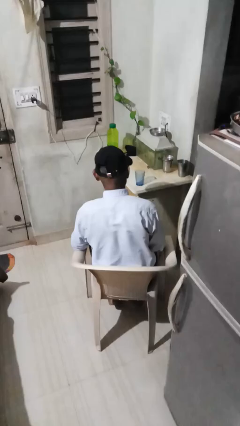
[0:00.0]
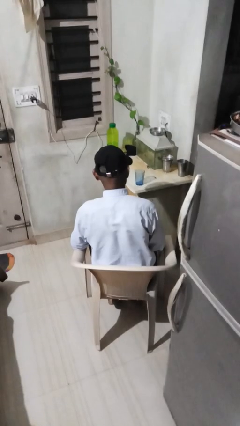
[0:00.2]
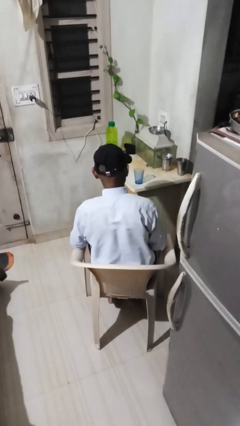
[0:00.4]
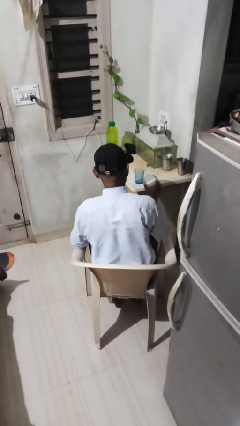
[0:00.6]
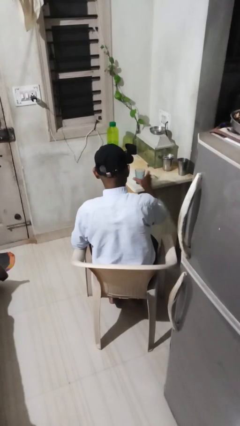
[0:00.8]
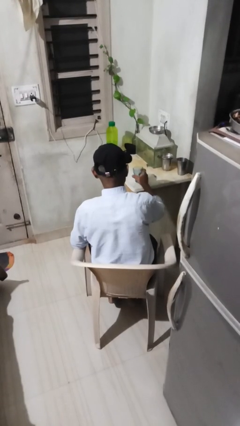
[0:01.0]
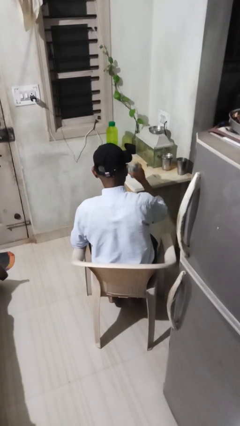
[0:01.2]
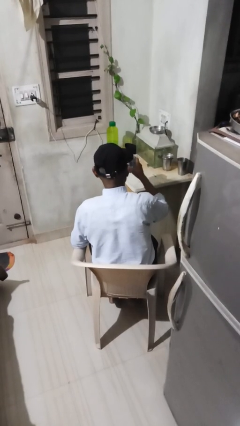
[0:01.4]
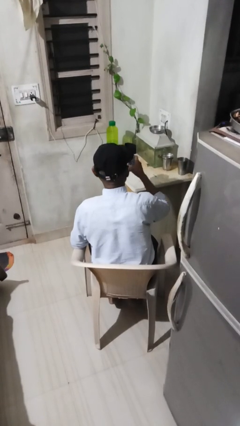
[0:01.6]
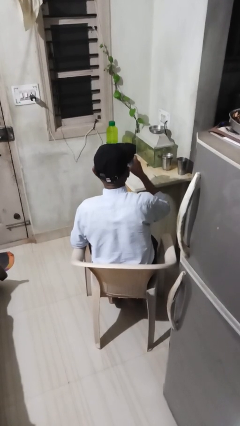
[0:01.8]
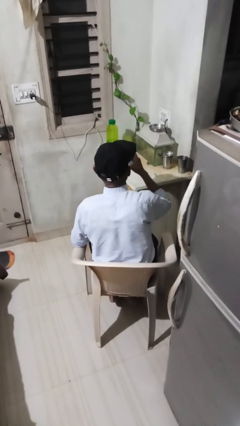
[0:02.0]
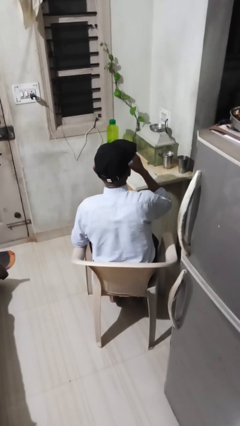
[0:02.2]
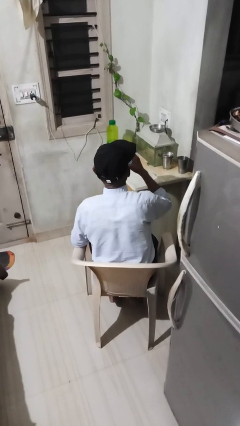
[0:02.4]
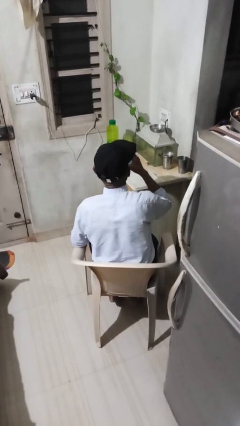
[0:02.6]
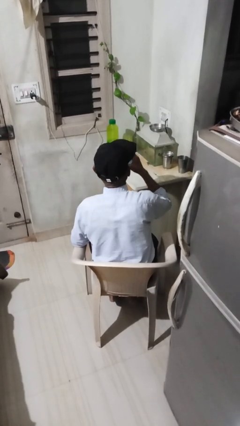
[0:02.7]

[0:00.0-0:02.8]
person picks up object from table

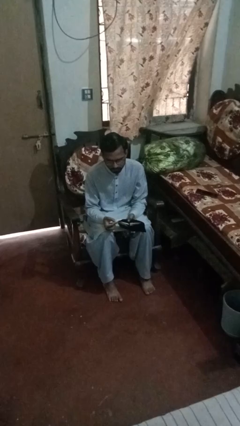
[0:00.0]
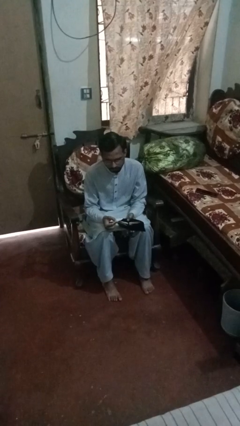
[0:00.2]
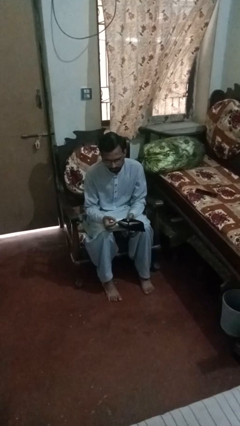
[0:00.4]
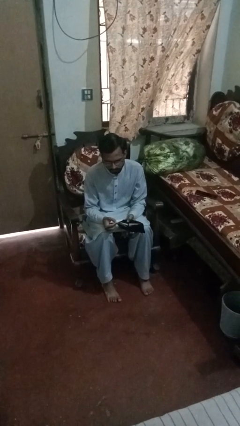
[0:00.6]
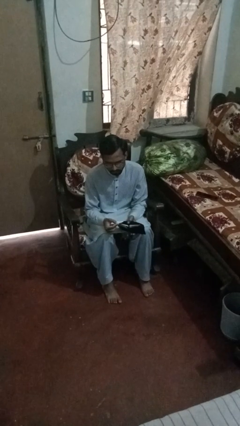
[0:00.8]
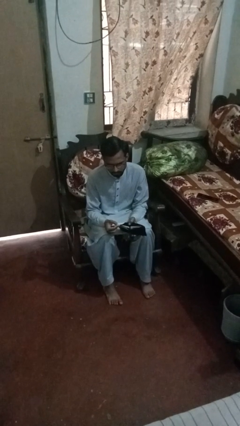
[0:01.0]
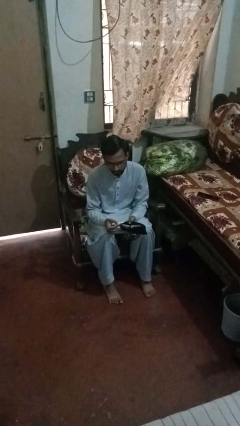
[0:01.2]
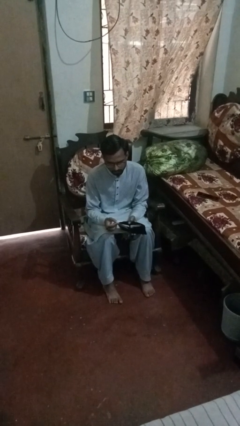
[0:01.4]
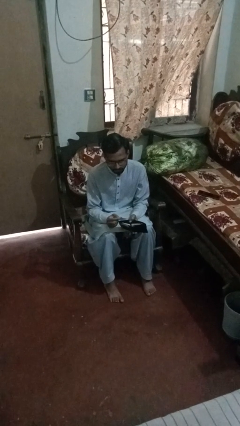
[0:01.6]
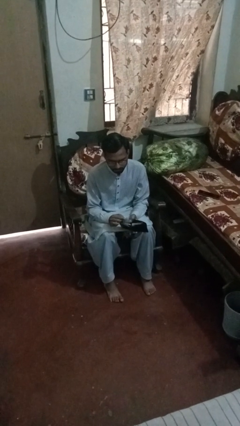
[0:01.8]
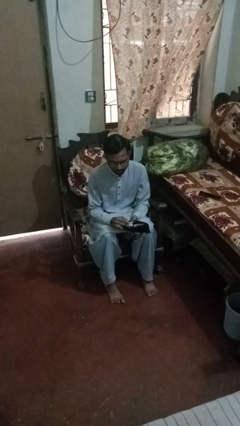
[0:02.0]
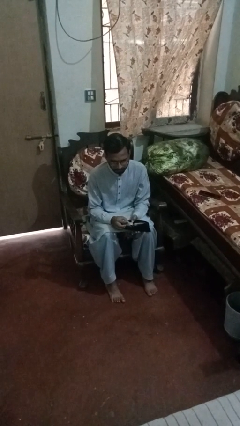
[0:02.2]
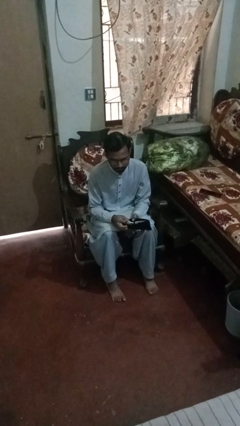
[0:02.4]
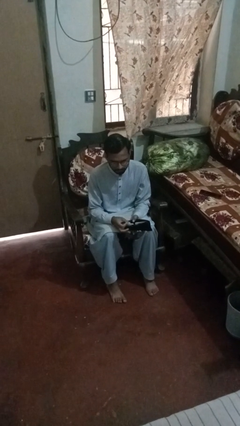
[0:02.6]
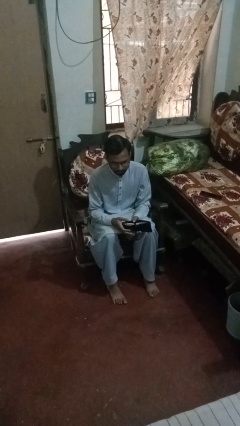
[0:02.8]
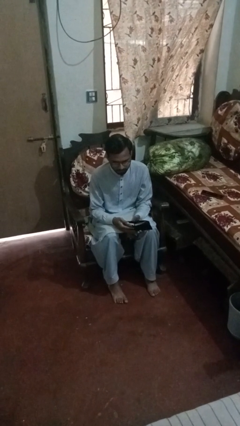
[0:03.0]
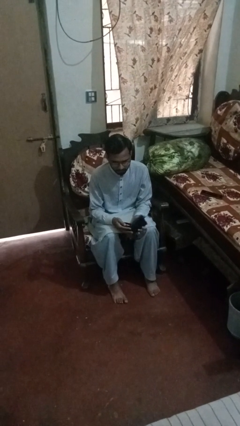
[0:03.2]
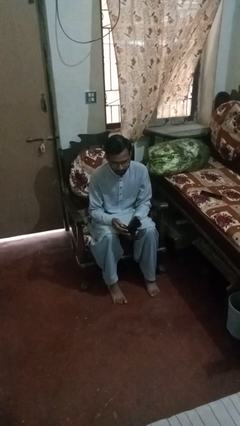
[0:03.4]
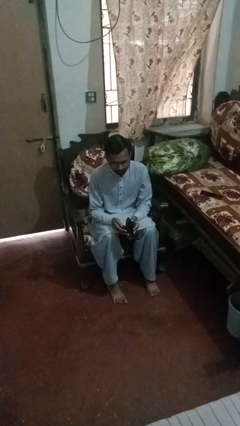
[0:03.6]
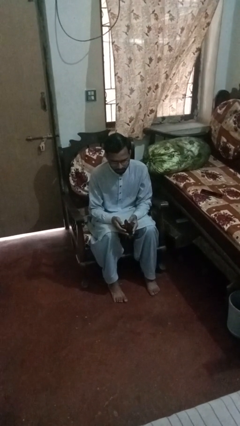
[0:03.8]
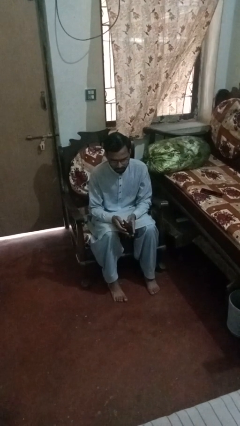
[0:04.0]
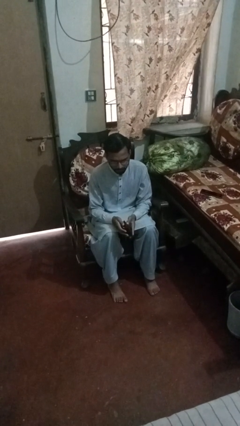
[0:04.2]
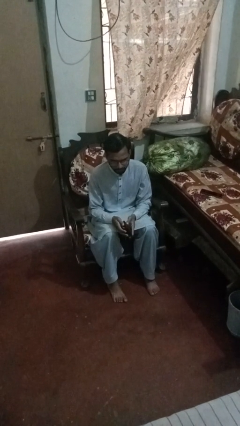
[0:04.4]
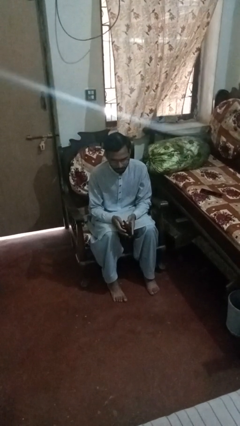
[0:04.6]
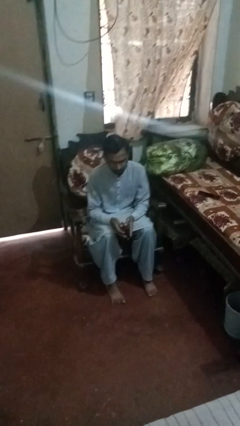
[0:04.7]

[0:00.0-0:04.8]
person puts object into purse

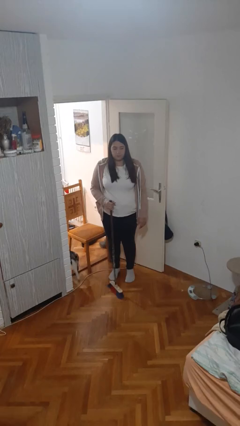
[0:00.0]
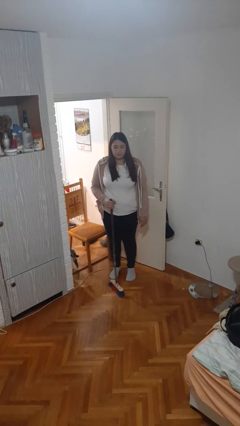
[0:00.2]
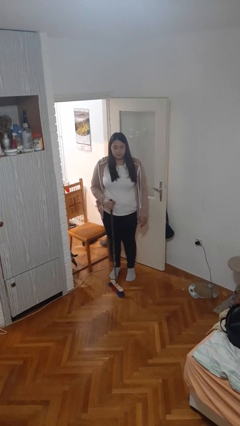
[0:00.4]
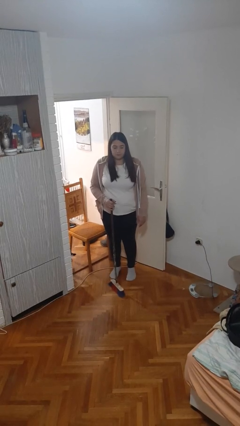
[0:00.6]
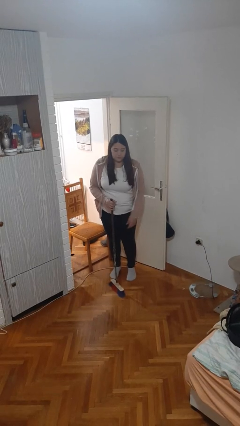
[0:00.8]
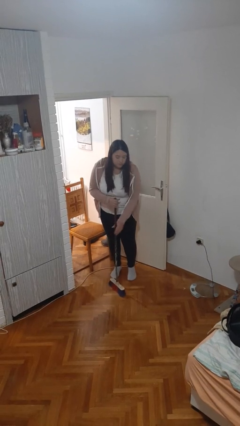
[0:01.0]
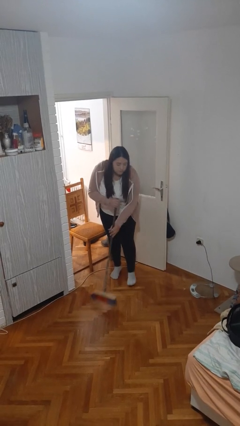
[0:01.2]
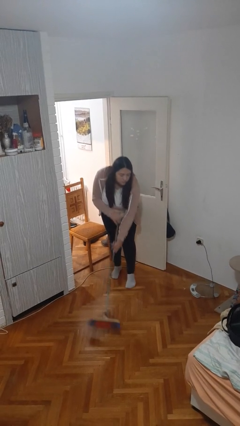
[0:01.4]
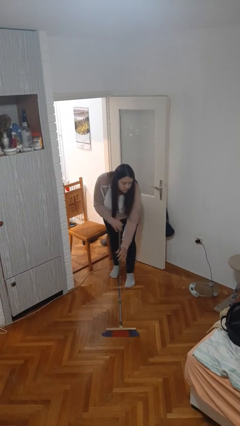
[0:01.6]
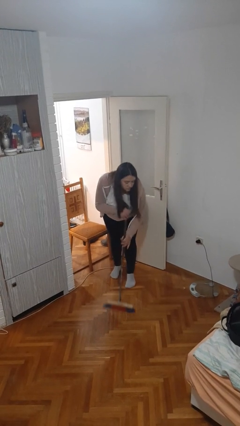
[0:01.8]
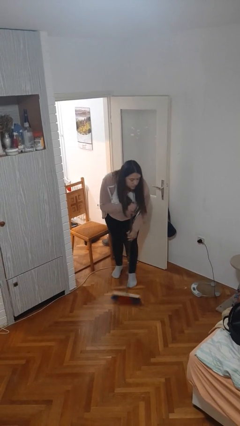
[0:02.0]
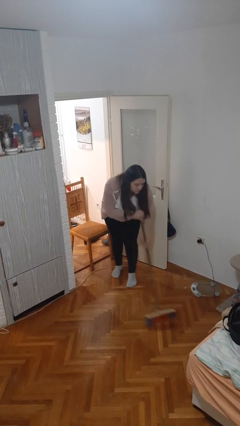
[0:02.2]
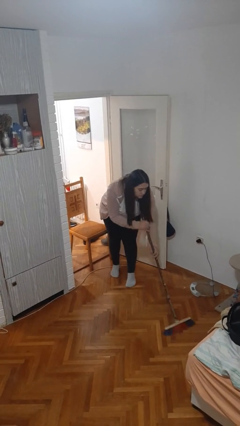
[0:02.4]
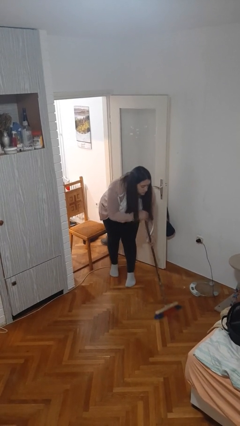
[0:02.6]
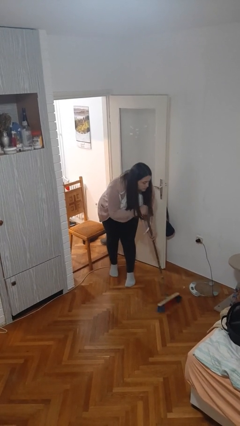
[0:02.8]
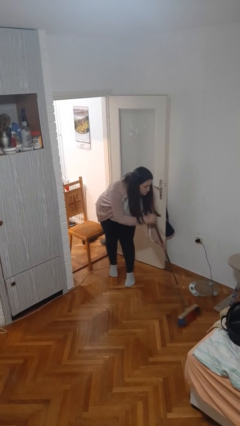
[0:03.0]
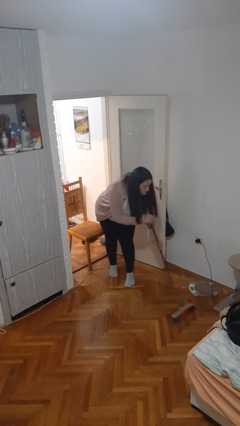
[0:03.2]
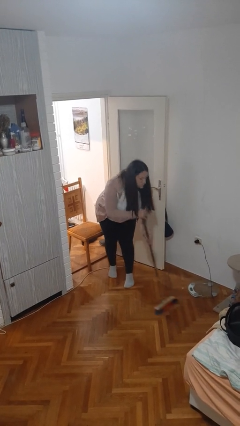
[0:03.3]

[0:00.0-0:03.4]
person sweeps floor

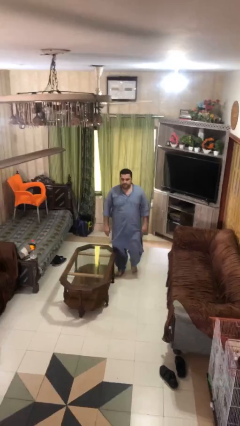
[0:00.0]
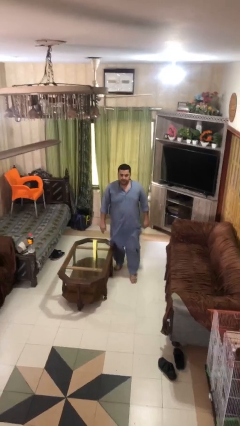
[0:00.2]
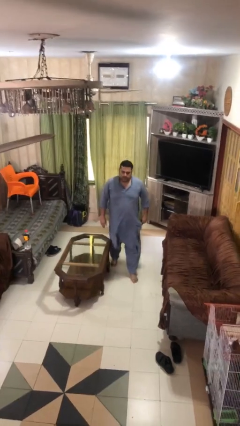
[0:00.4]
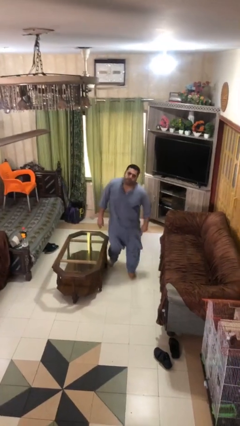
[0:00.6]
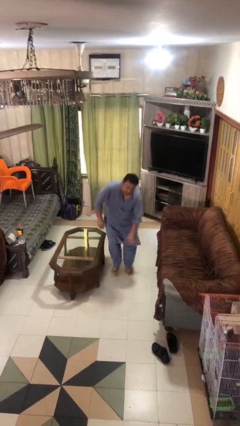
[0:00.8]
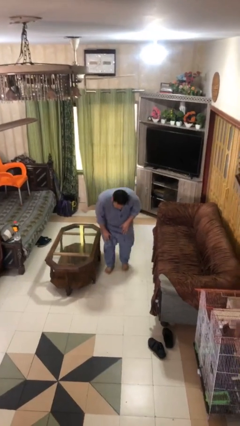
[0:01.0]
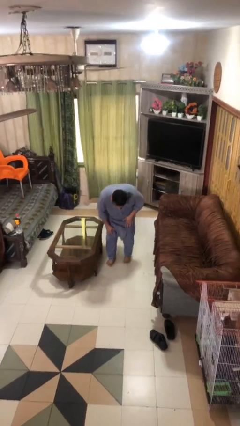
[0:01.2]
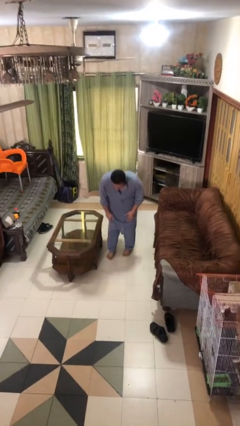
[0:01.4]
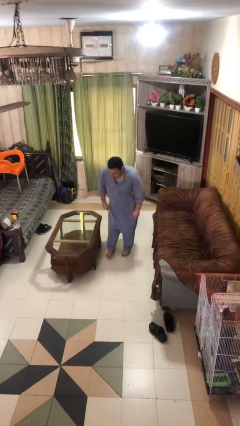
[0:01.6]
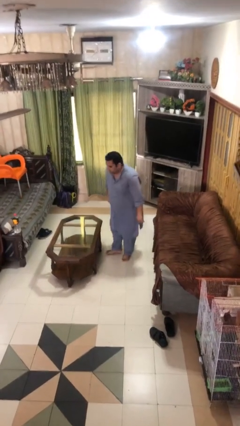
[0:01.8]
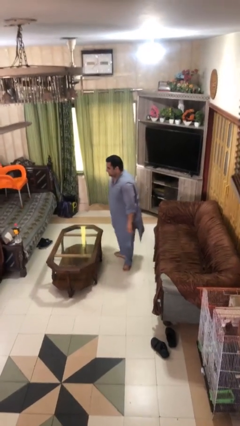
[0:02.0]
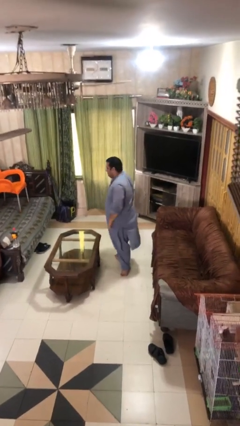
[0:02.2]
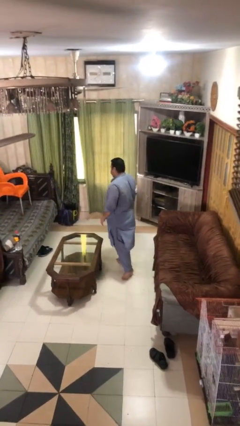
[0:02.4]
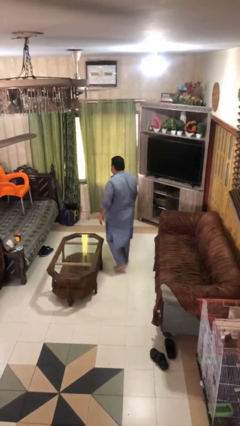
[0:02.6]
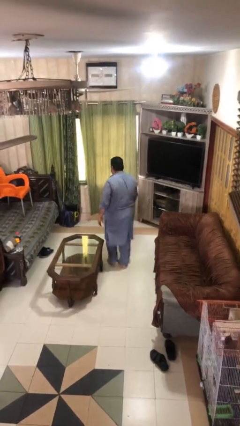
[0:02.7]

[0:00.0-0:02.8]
person bumps into table

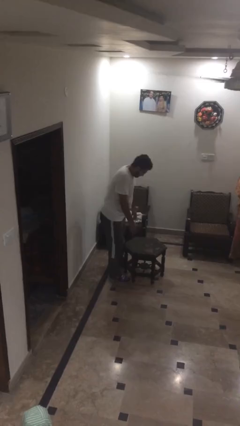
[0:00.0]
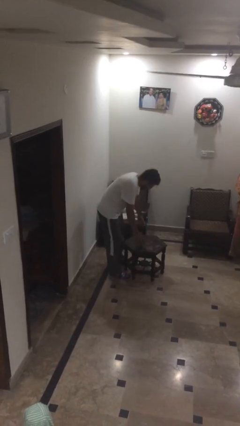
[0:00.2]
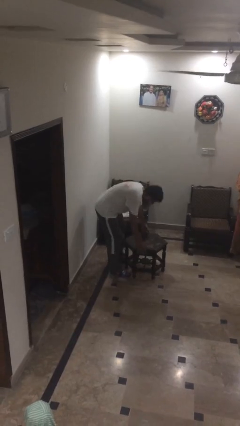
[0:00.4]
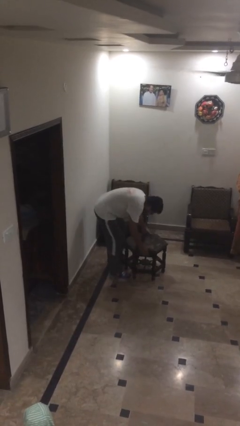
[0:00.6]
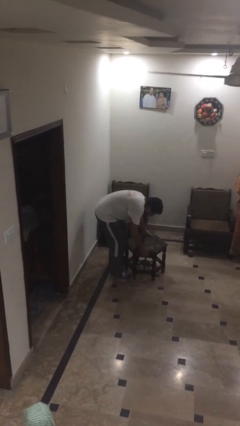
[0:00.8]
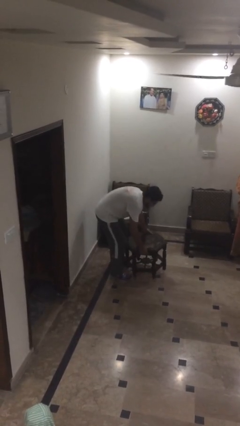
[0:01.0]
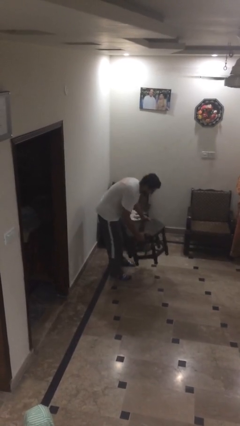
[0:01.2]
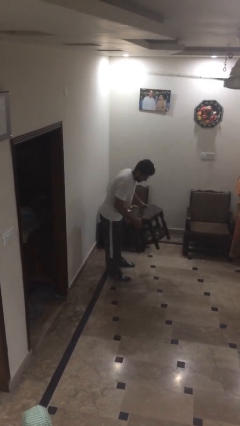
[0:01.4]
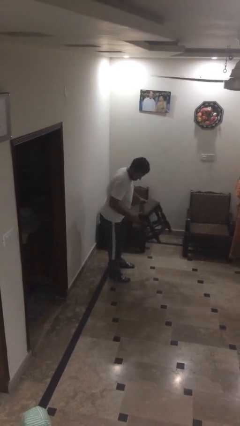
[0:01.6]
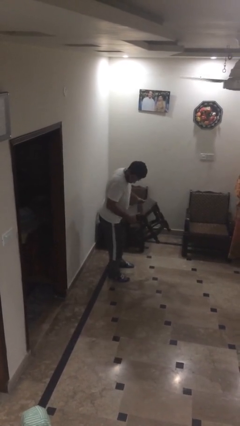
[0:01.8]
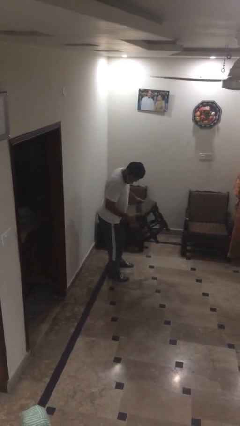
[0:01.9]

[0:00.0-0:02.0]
person picks up object from floor

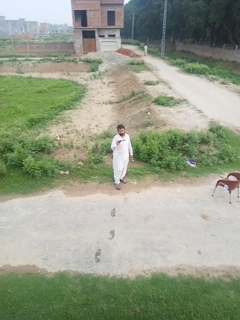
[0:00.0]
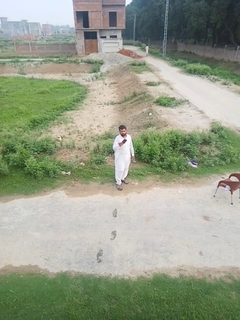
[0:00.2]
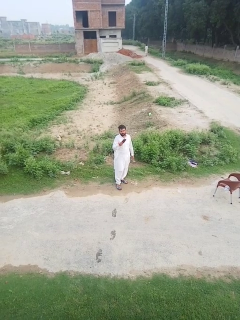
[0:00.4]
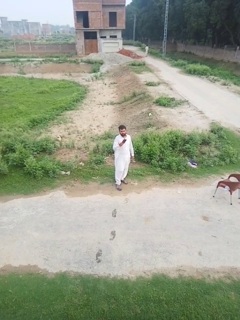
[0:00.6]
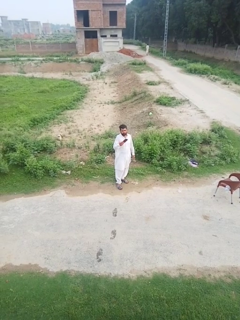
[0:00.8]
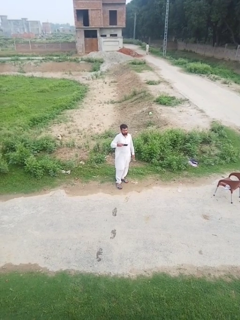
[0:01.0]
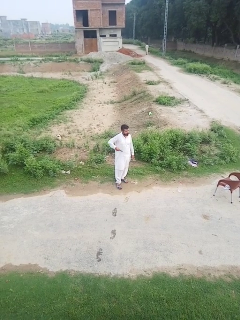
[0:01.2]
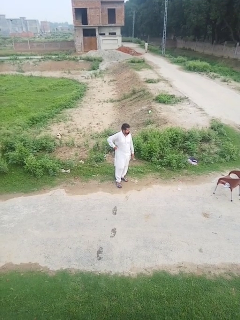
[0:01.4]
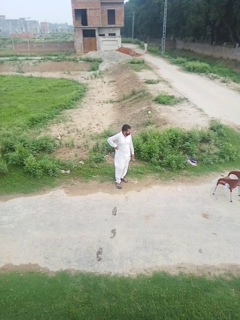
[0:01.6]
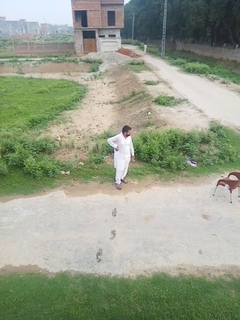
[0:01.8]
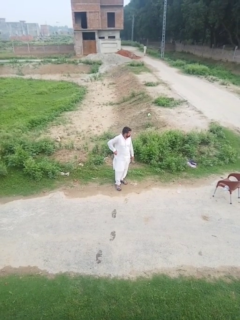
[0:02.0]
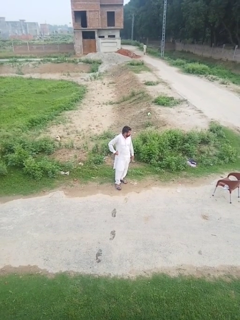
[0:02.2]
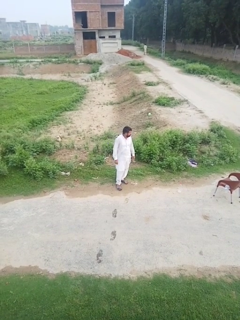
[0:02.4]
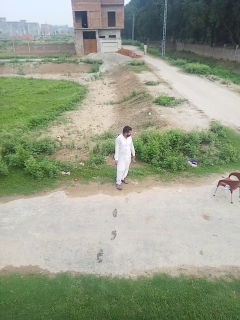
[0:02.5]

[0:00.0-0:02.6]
person puts phone into pocket
